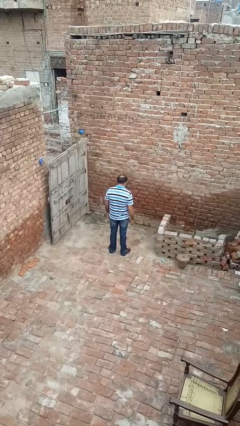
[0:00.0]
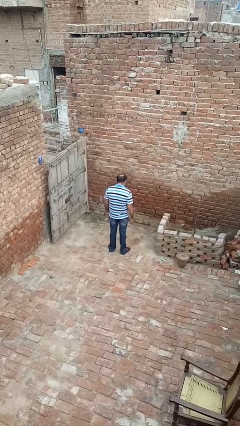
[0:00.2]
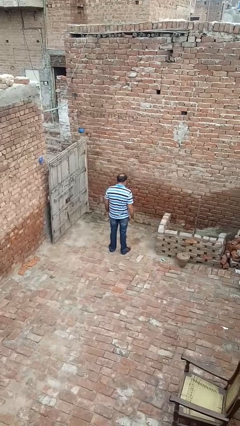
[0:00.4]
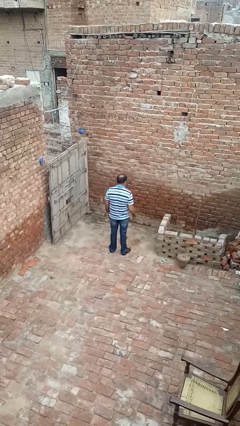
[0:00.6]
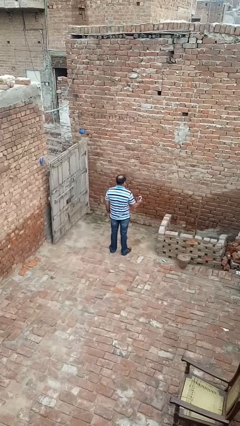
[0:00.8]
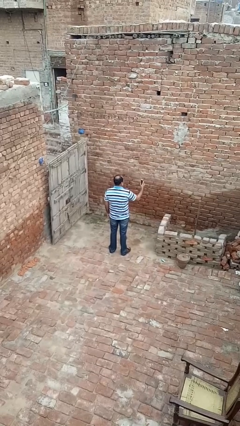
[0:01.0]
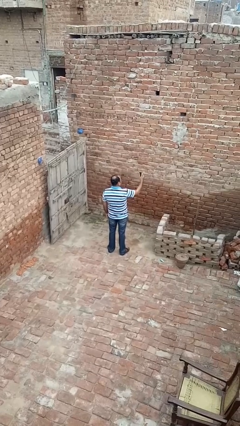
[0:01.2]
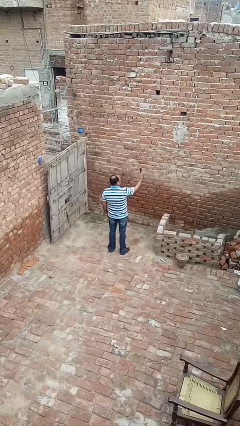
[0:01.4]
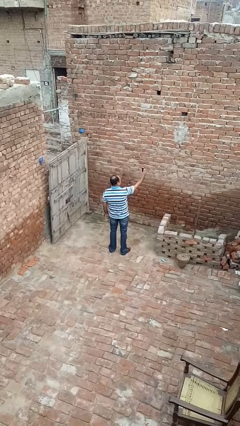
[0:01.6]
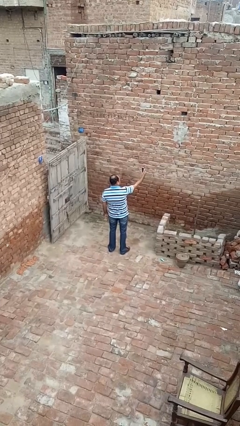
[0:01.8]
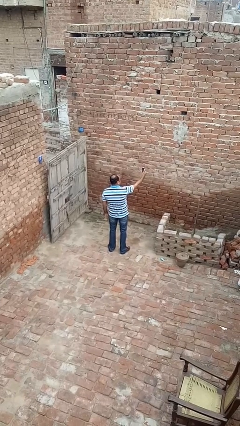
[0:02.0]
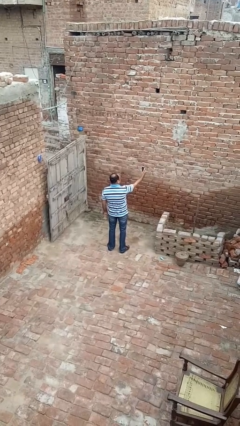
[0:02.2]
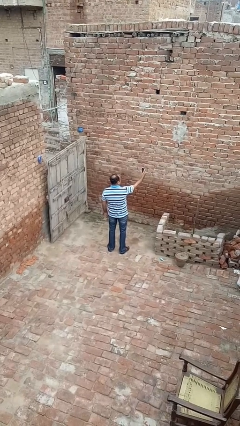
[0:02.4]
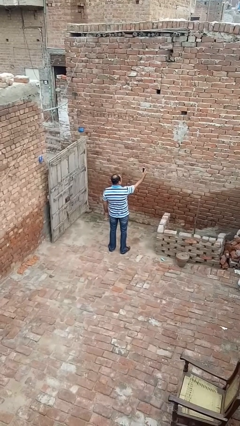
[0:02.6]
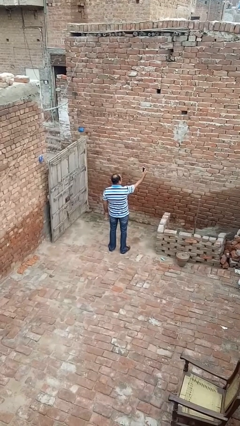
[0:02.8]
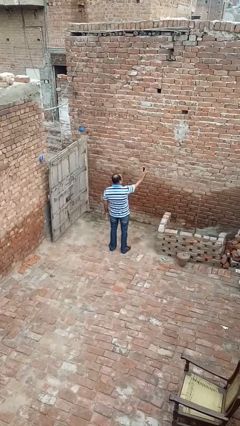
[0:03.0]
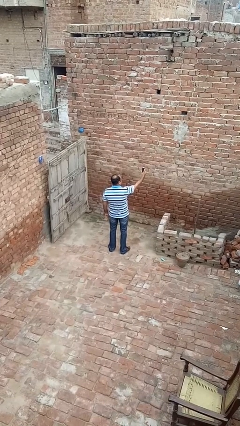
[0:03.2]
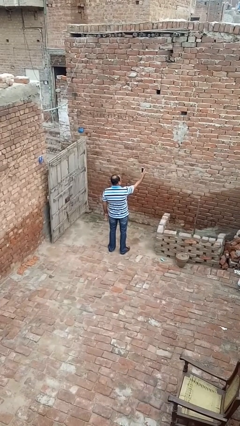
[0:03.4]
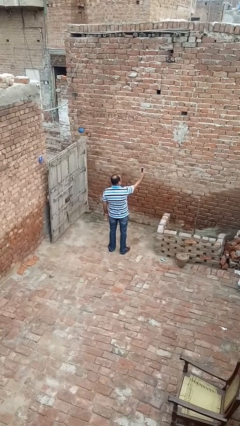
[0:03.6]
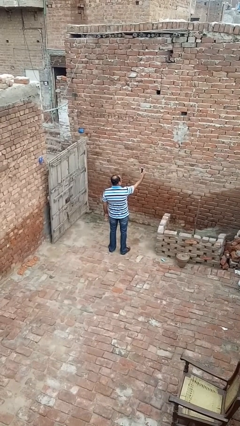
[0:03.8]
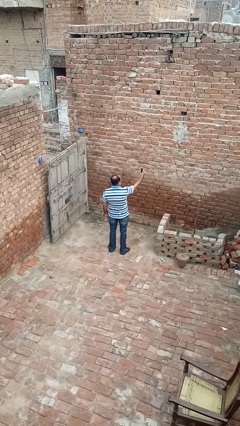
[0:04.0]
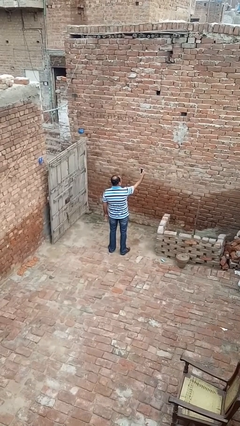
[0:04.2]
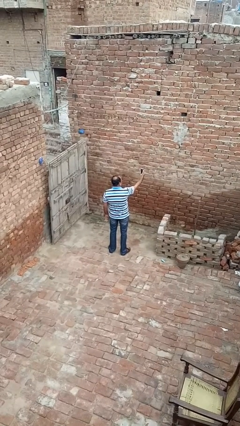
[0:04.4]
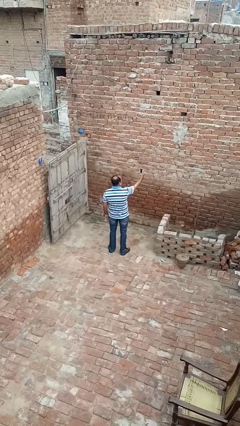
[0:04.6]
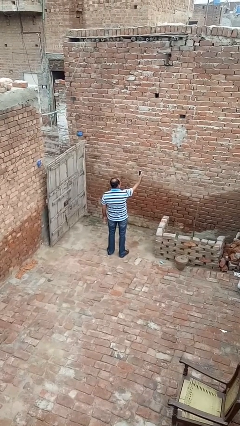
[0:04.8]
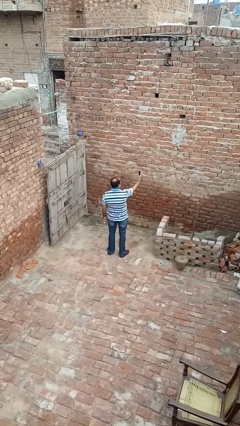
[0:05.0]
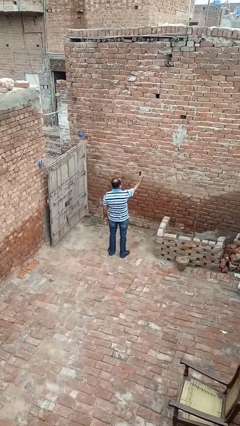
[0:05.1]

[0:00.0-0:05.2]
person takes selfie

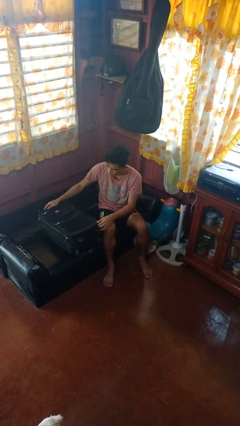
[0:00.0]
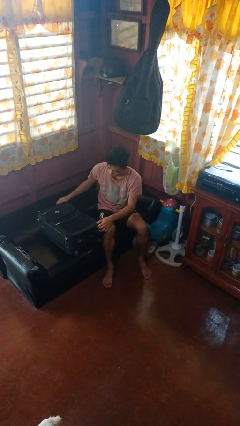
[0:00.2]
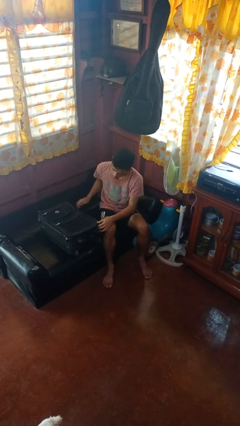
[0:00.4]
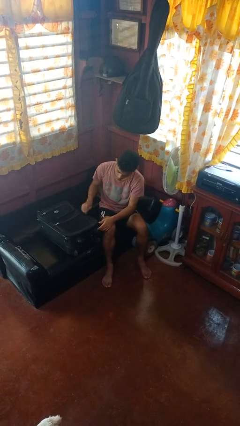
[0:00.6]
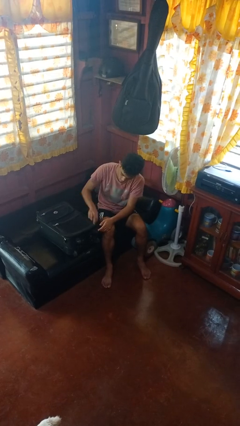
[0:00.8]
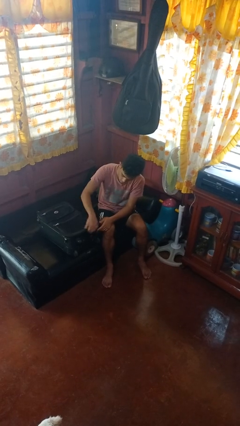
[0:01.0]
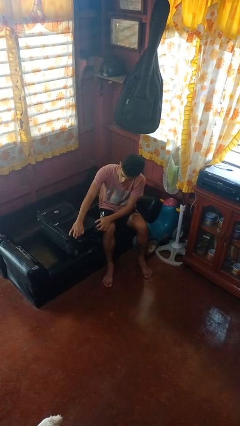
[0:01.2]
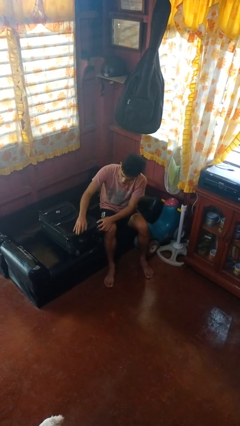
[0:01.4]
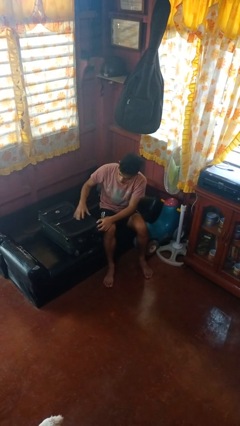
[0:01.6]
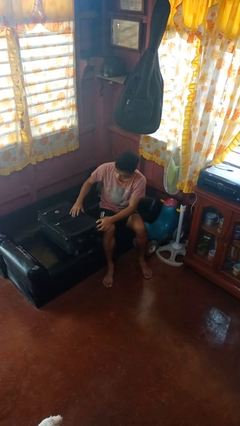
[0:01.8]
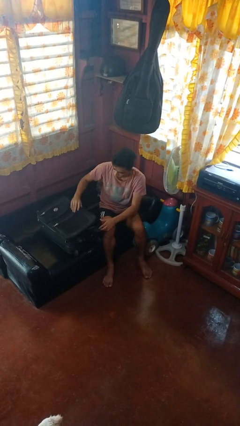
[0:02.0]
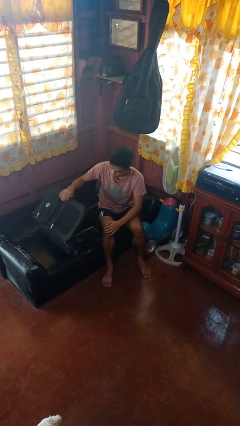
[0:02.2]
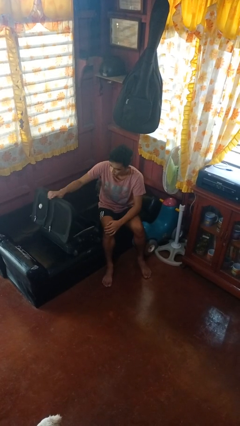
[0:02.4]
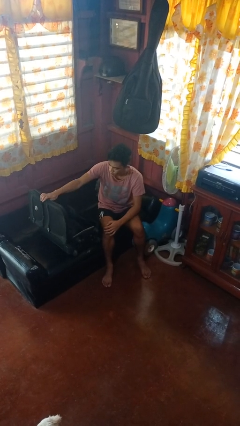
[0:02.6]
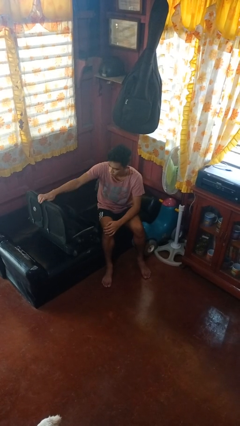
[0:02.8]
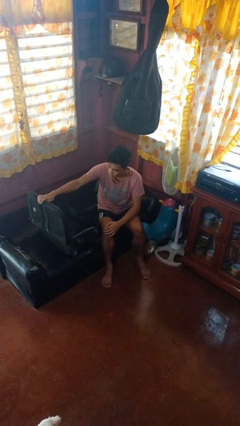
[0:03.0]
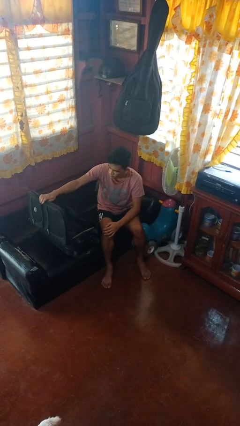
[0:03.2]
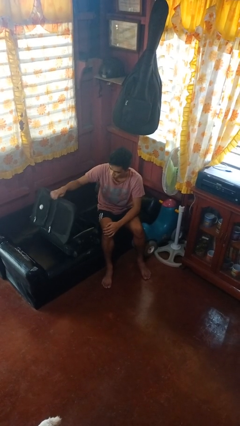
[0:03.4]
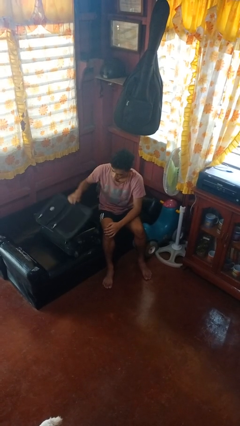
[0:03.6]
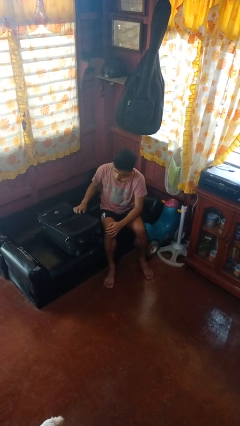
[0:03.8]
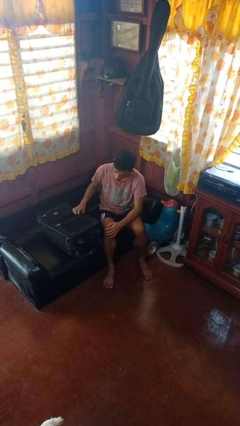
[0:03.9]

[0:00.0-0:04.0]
person opens suitcase

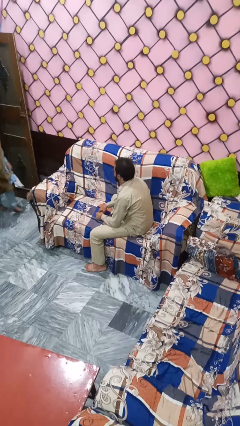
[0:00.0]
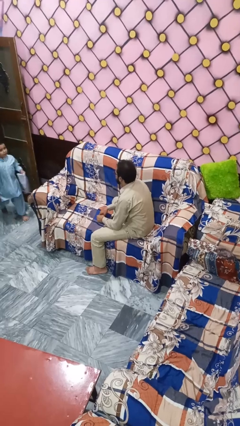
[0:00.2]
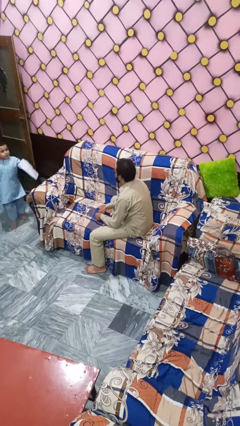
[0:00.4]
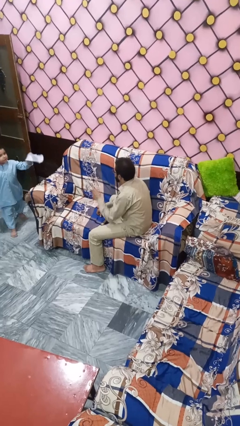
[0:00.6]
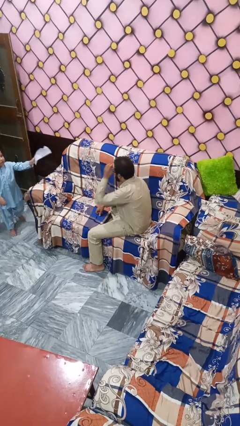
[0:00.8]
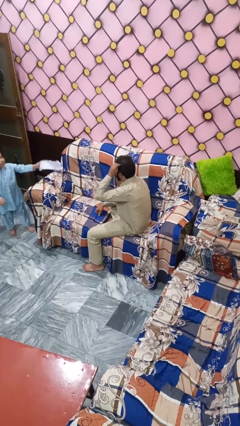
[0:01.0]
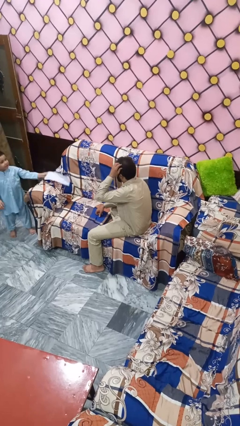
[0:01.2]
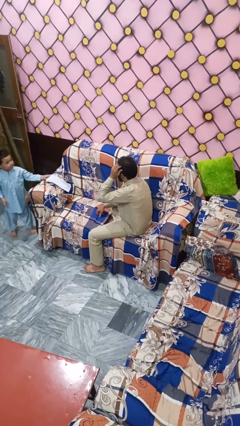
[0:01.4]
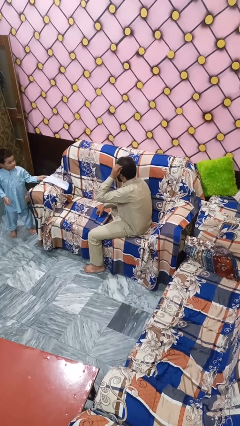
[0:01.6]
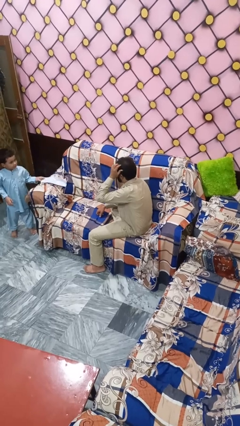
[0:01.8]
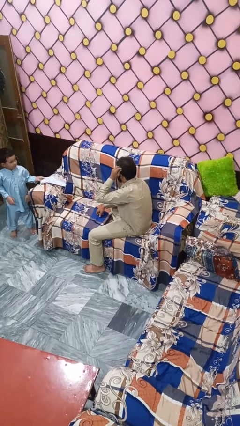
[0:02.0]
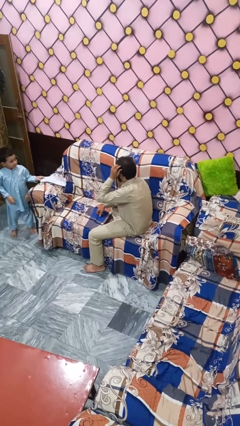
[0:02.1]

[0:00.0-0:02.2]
person strokes hair

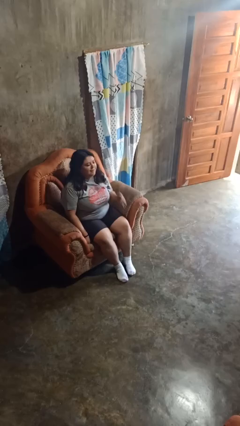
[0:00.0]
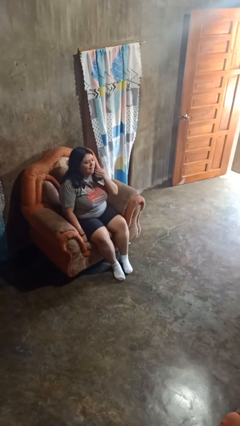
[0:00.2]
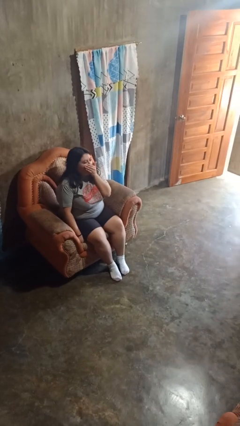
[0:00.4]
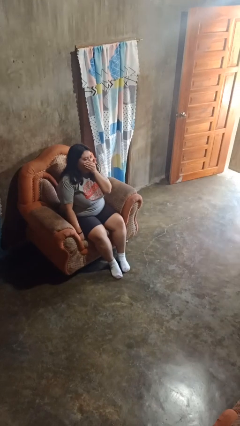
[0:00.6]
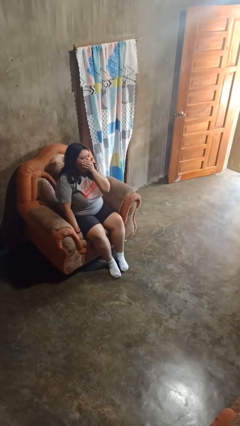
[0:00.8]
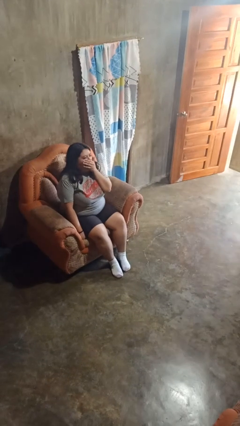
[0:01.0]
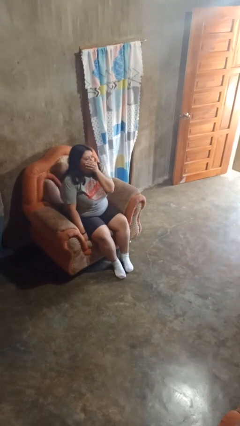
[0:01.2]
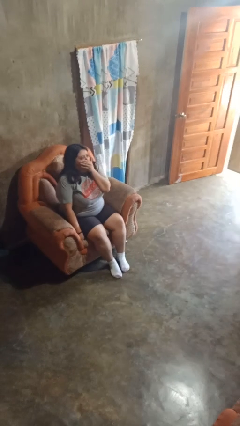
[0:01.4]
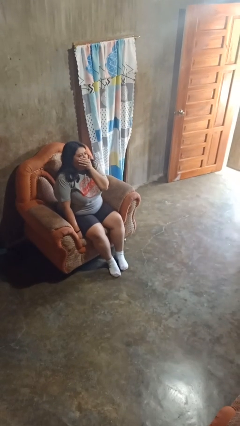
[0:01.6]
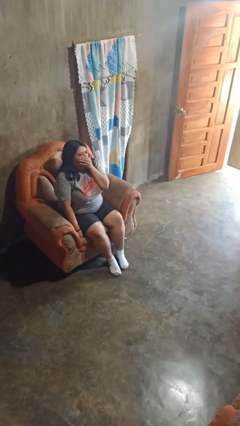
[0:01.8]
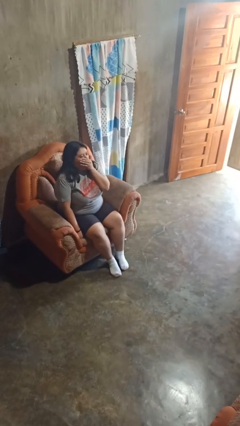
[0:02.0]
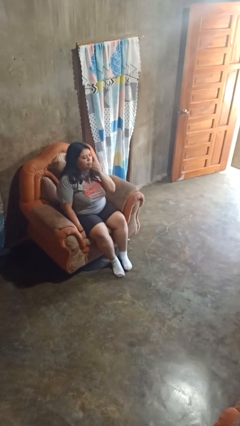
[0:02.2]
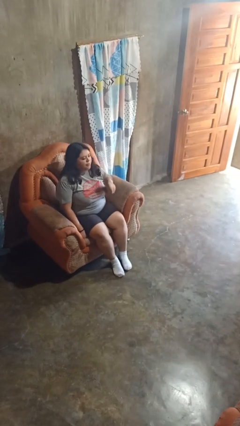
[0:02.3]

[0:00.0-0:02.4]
person yawns

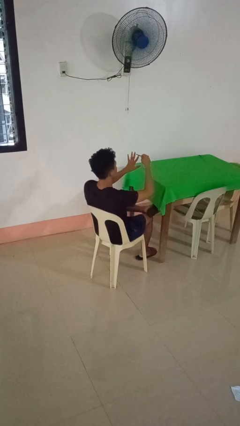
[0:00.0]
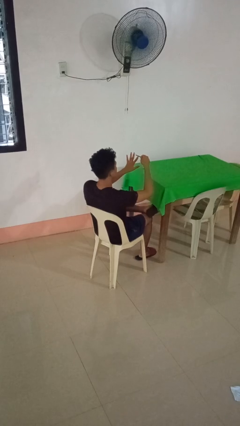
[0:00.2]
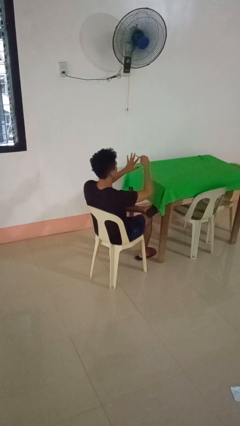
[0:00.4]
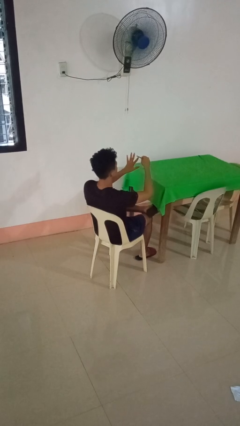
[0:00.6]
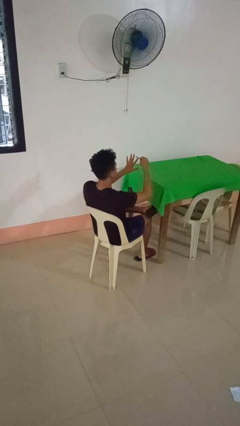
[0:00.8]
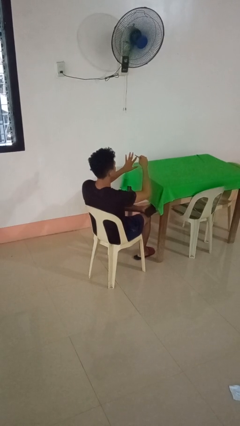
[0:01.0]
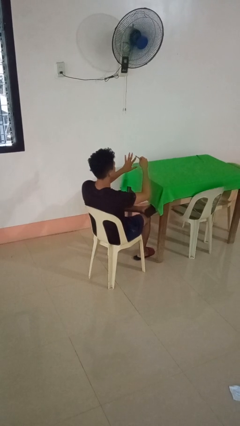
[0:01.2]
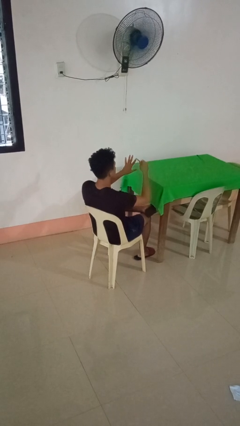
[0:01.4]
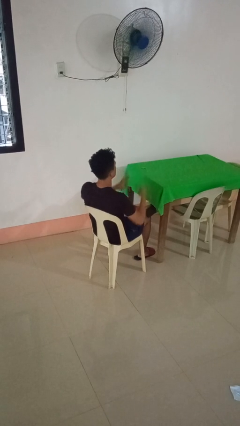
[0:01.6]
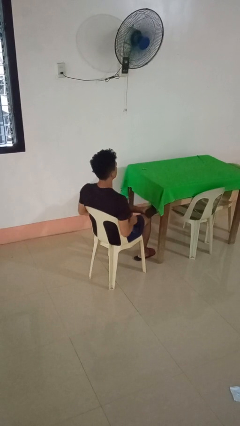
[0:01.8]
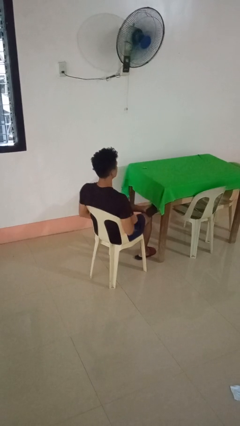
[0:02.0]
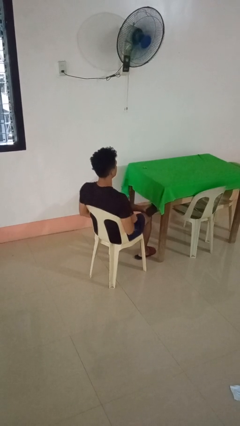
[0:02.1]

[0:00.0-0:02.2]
person files fingernails

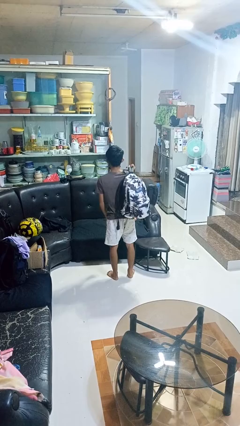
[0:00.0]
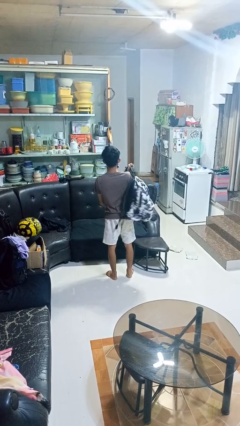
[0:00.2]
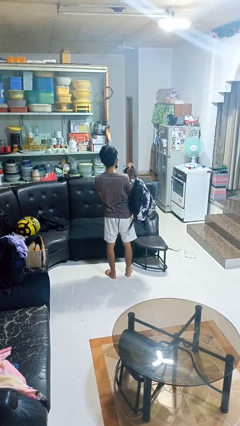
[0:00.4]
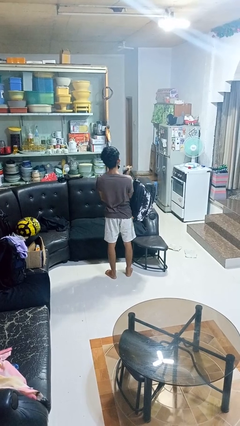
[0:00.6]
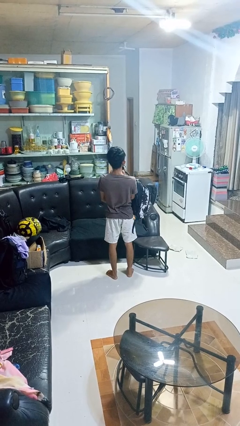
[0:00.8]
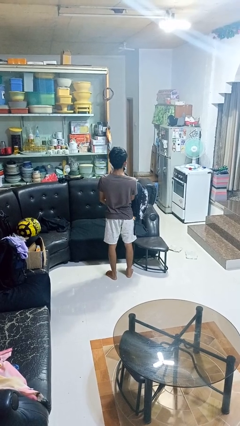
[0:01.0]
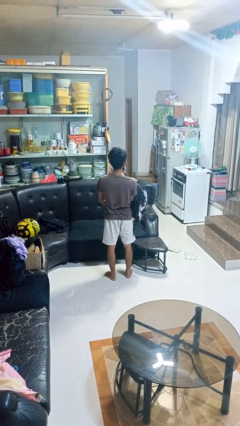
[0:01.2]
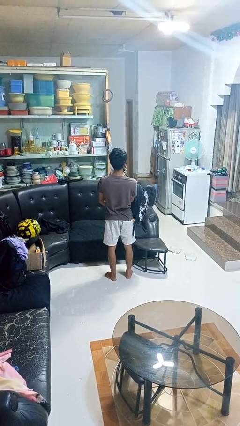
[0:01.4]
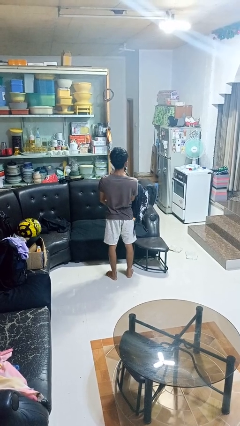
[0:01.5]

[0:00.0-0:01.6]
person takes off backpack
